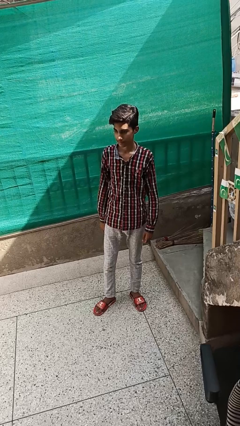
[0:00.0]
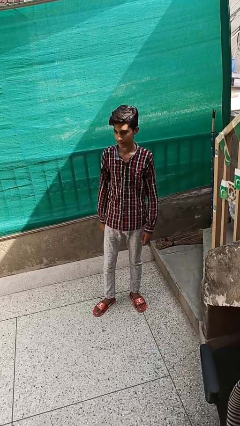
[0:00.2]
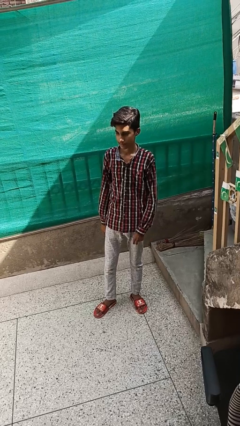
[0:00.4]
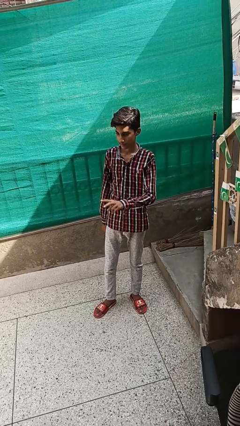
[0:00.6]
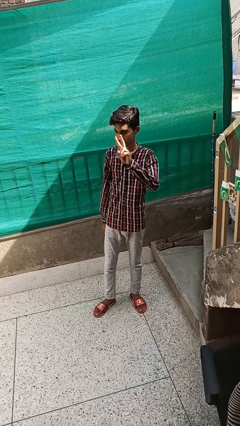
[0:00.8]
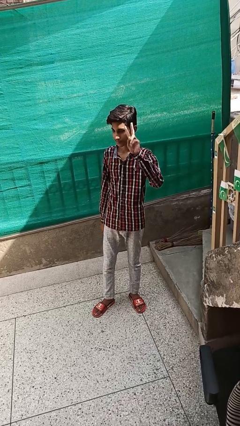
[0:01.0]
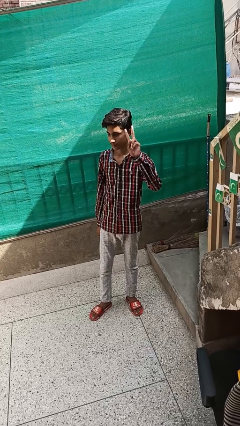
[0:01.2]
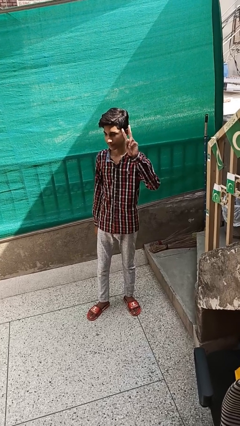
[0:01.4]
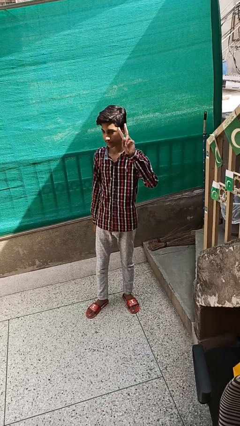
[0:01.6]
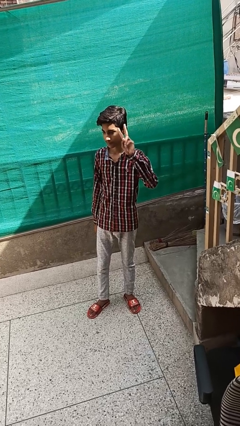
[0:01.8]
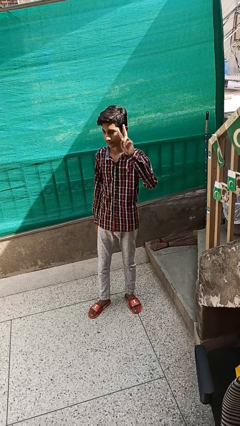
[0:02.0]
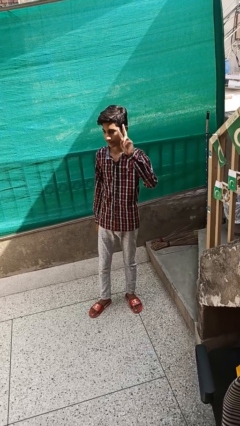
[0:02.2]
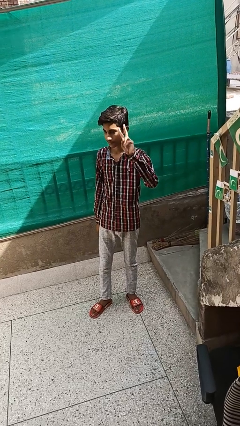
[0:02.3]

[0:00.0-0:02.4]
person gestures peace

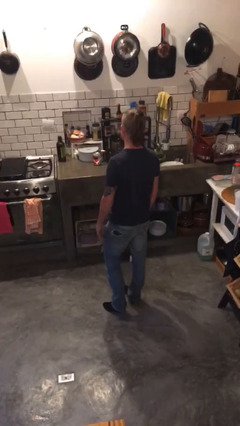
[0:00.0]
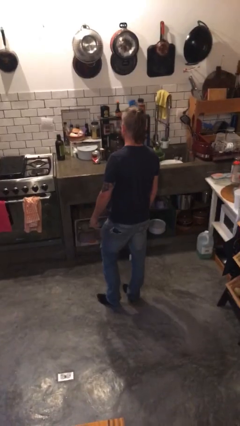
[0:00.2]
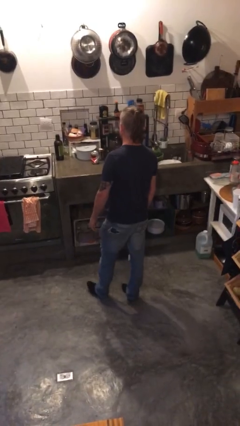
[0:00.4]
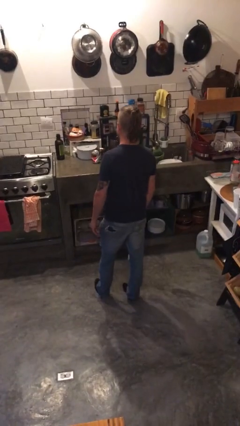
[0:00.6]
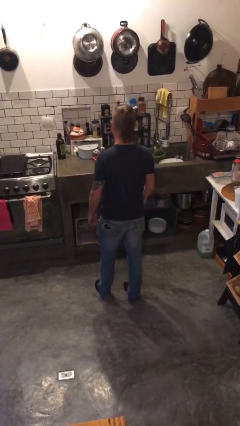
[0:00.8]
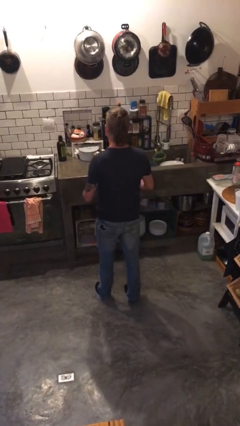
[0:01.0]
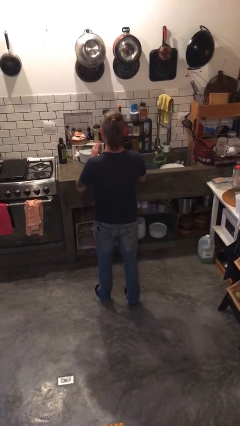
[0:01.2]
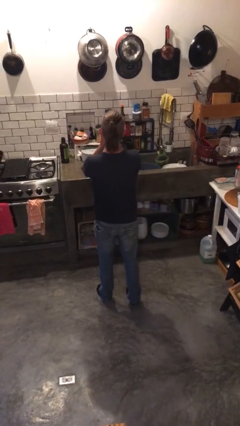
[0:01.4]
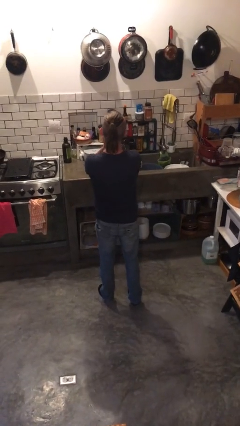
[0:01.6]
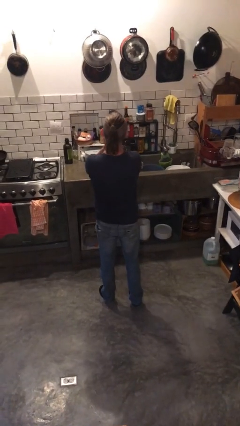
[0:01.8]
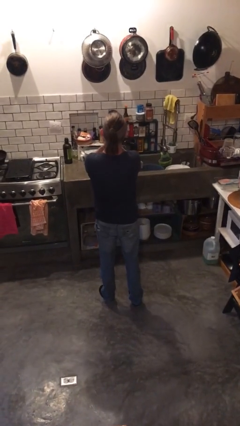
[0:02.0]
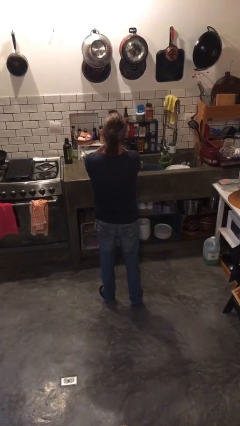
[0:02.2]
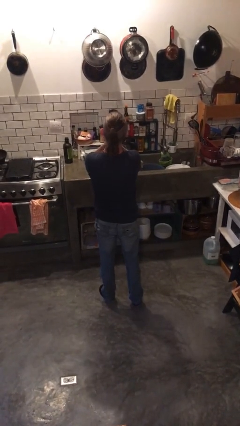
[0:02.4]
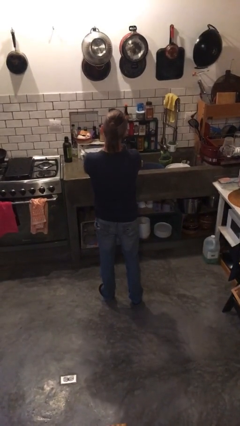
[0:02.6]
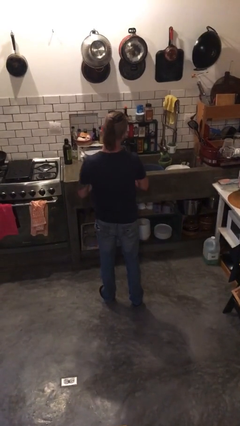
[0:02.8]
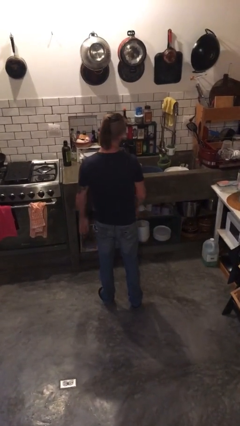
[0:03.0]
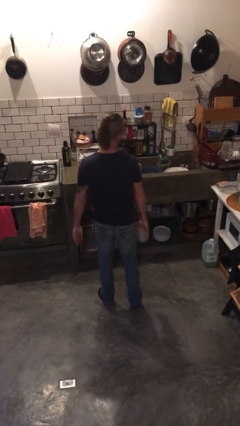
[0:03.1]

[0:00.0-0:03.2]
person yawns

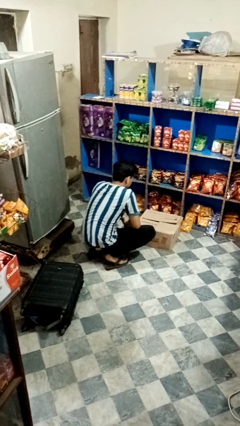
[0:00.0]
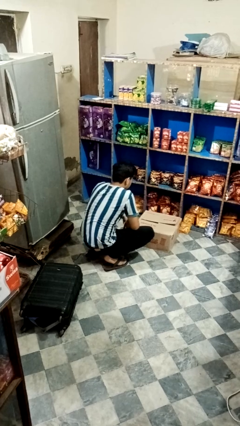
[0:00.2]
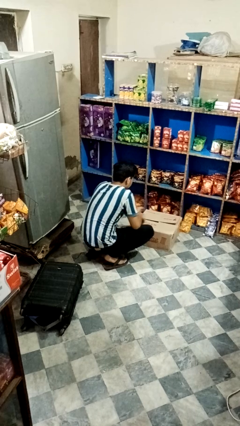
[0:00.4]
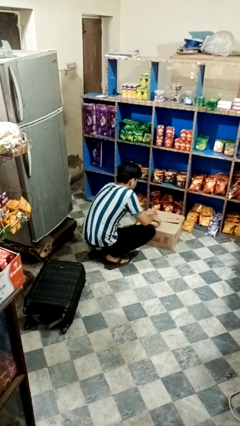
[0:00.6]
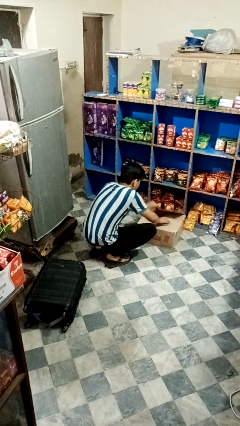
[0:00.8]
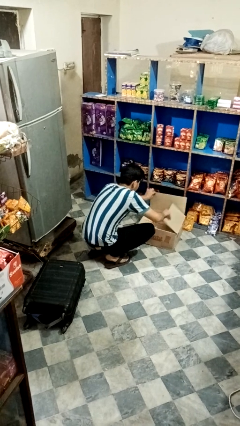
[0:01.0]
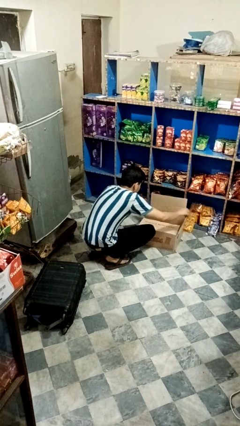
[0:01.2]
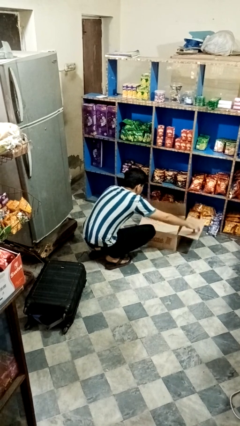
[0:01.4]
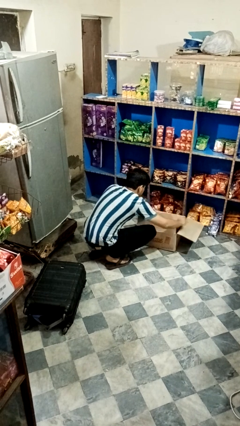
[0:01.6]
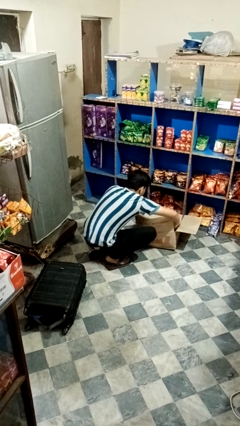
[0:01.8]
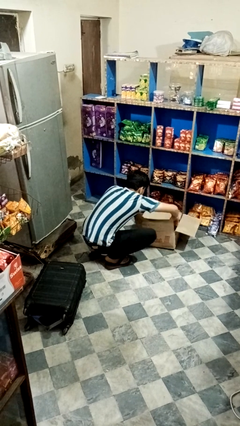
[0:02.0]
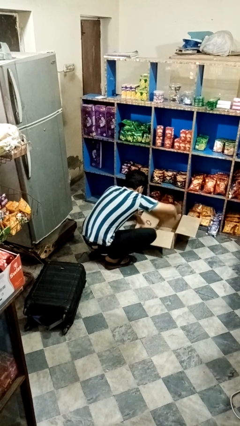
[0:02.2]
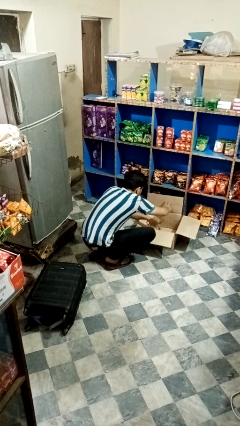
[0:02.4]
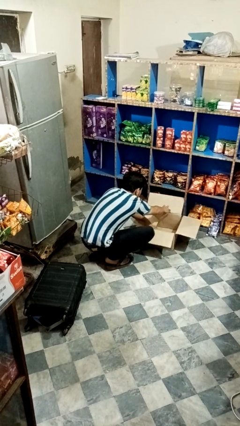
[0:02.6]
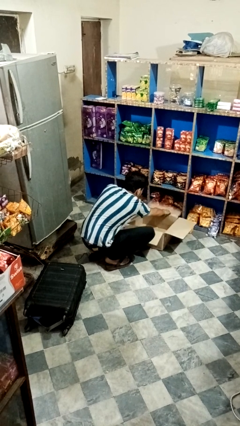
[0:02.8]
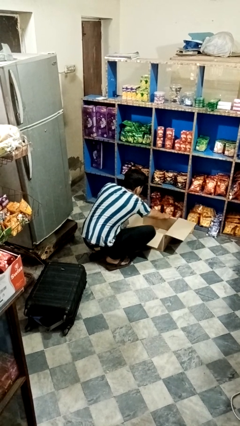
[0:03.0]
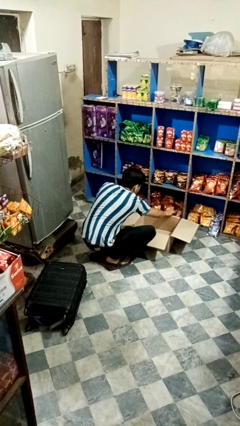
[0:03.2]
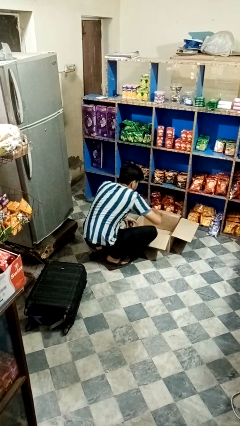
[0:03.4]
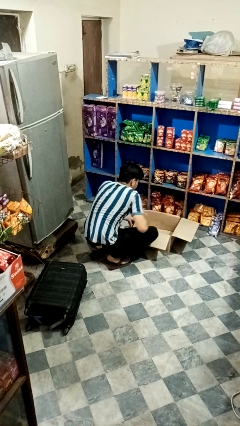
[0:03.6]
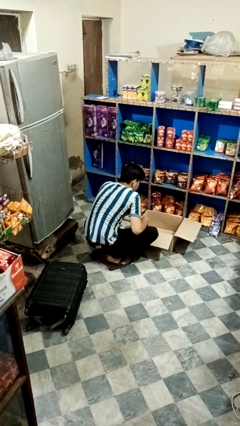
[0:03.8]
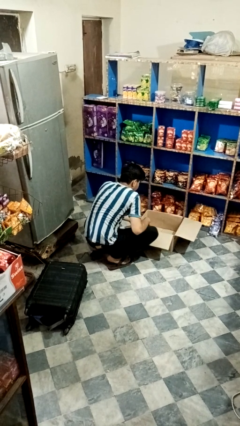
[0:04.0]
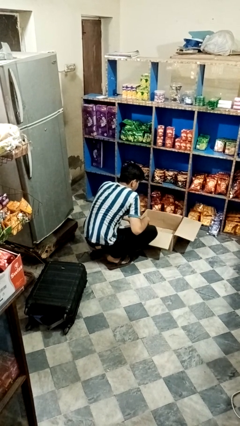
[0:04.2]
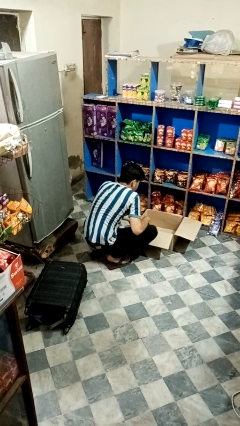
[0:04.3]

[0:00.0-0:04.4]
person opens box

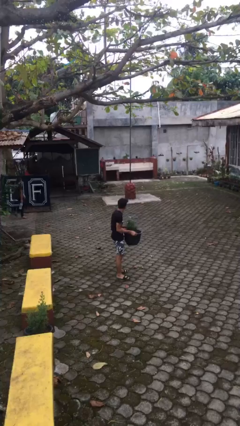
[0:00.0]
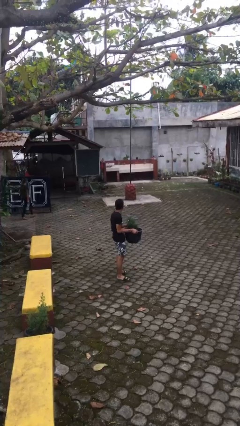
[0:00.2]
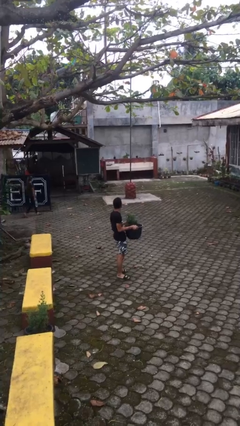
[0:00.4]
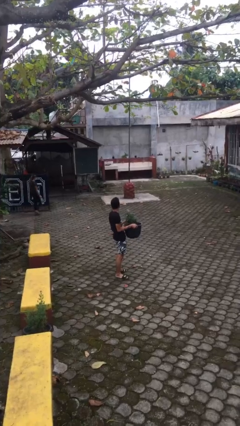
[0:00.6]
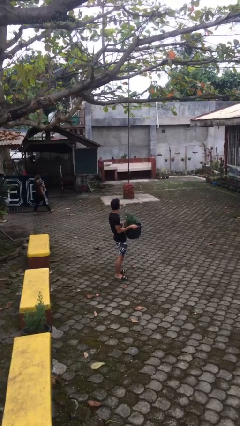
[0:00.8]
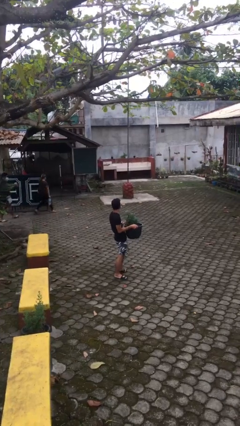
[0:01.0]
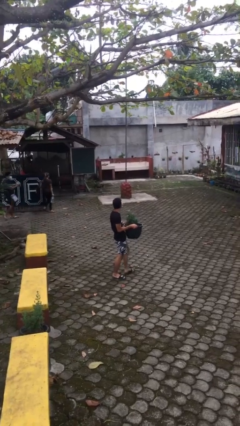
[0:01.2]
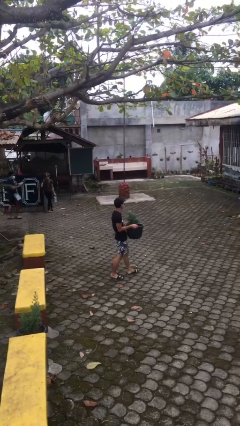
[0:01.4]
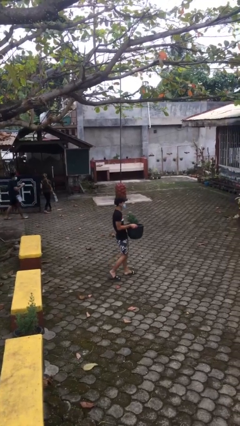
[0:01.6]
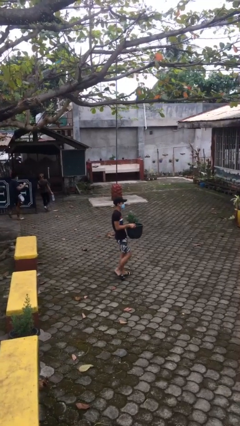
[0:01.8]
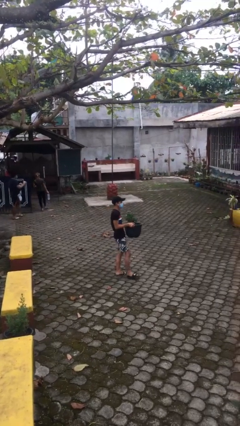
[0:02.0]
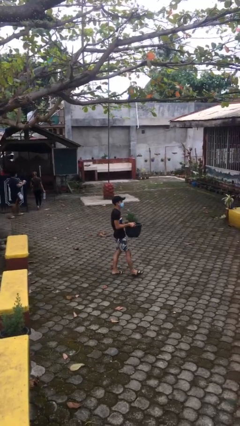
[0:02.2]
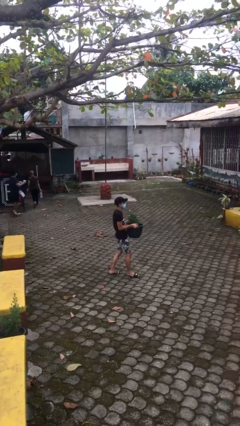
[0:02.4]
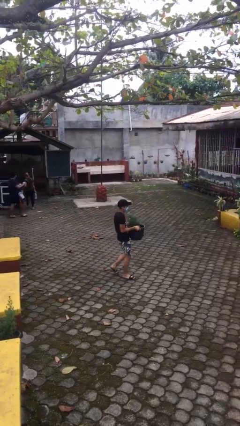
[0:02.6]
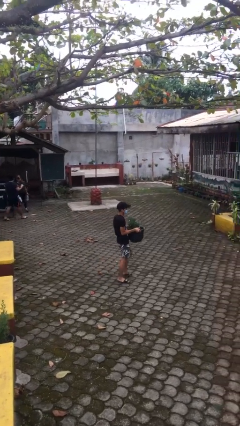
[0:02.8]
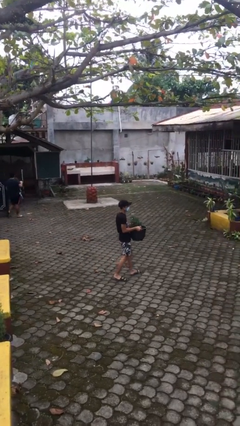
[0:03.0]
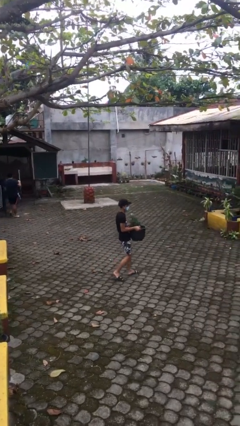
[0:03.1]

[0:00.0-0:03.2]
person carries heavy object

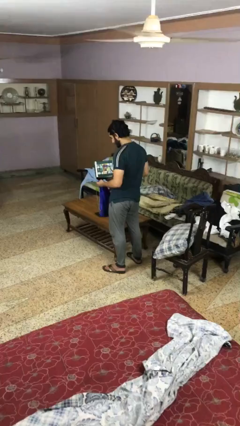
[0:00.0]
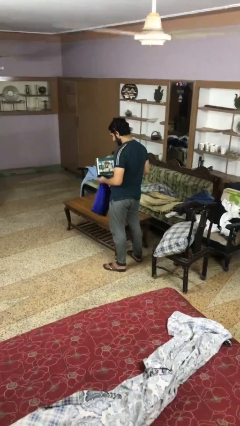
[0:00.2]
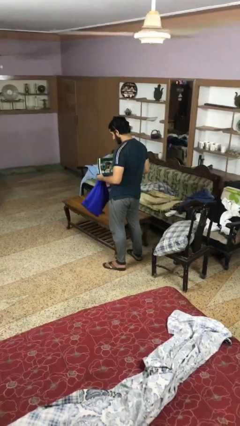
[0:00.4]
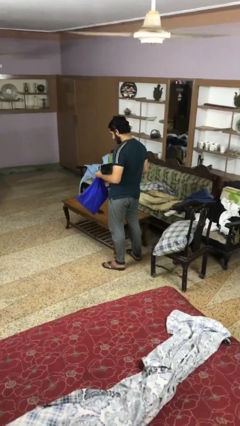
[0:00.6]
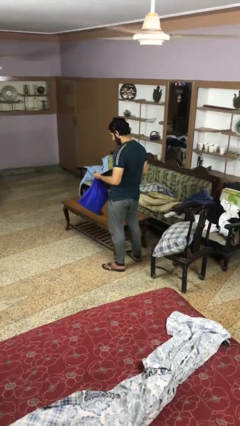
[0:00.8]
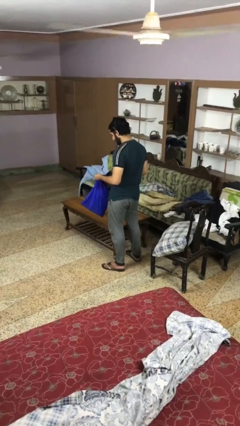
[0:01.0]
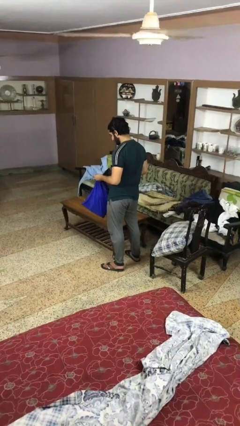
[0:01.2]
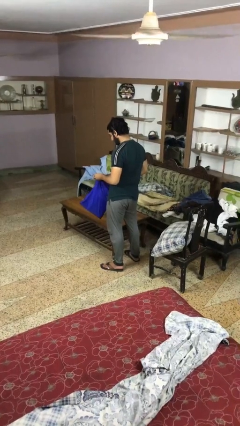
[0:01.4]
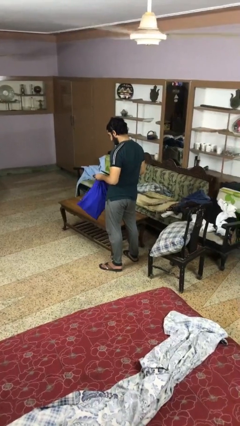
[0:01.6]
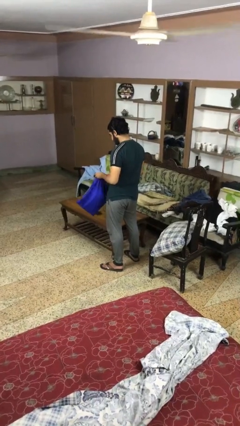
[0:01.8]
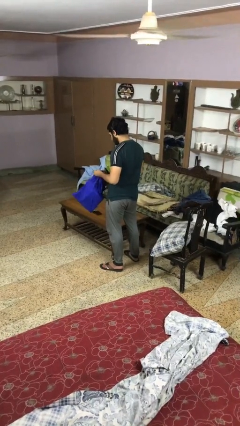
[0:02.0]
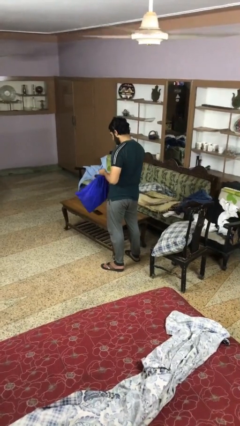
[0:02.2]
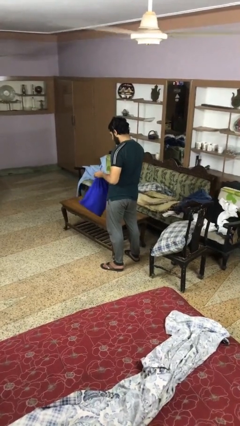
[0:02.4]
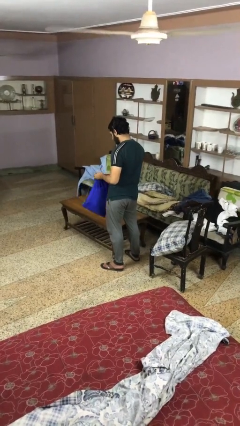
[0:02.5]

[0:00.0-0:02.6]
person puts object into bag

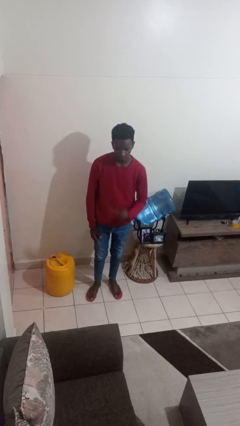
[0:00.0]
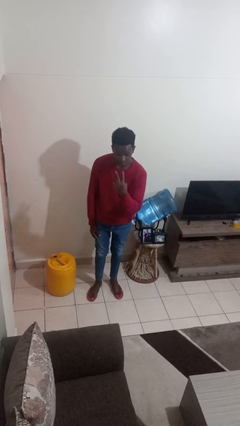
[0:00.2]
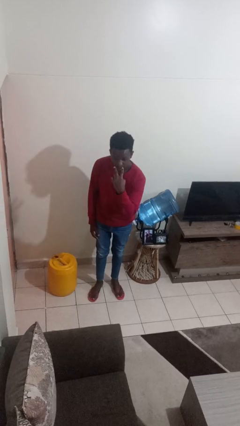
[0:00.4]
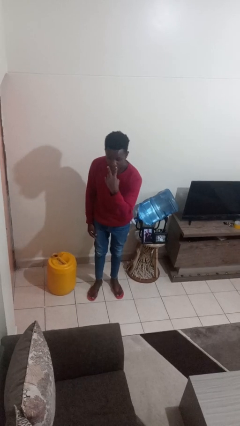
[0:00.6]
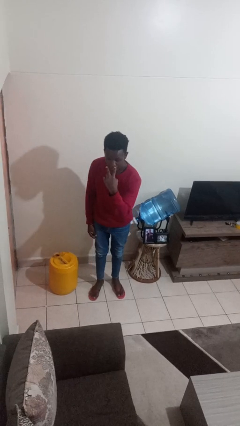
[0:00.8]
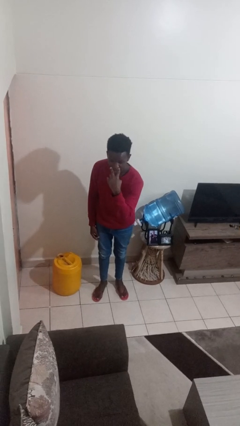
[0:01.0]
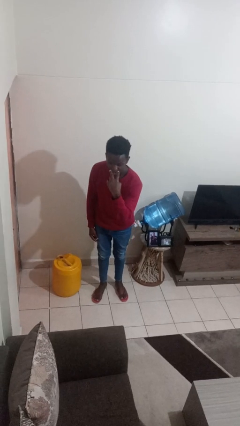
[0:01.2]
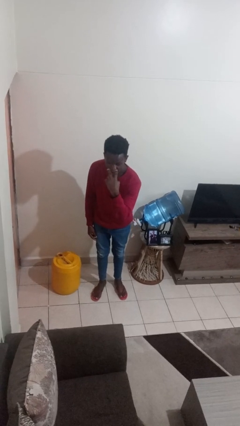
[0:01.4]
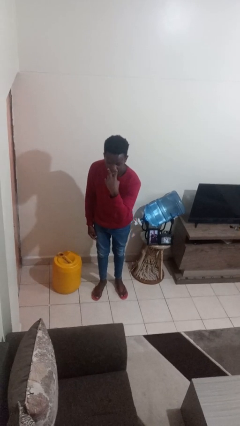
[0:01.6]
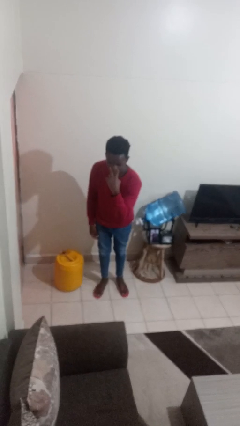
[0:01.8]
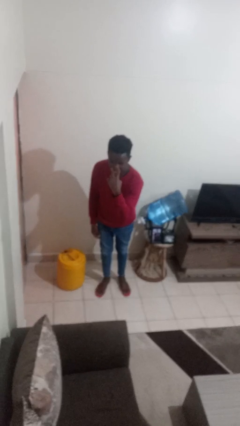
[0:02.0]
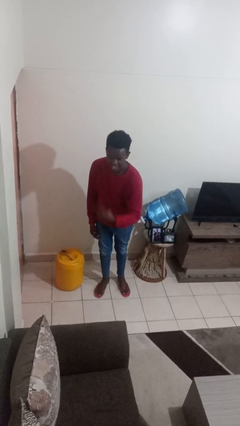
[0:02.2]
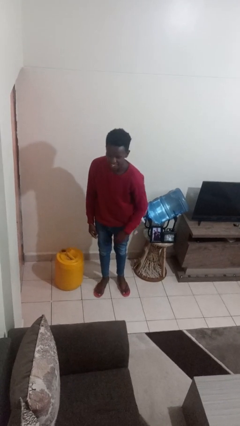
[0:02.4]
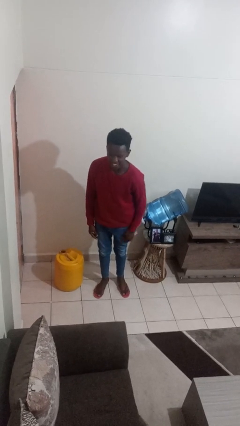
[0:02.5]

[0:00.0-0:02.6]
person gestures watch closely
